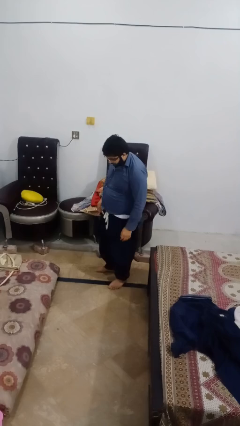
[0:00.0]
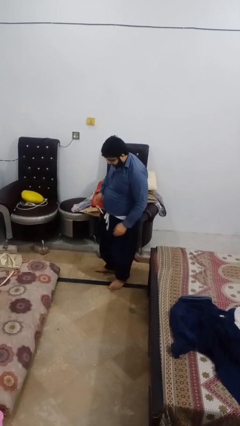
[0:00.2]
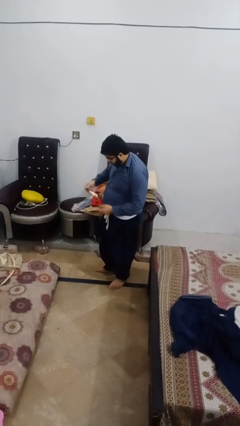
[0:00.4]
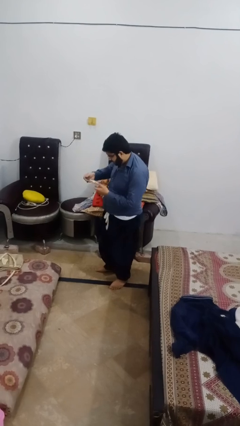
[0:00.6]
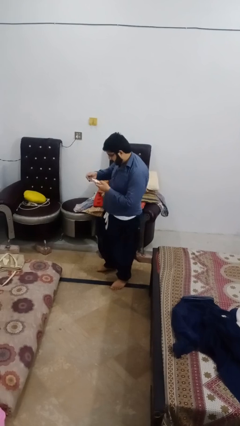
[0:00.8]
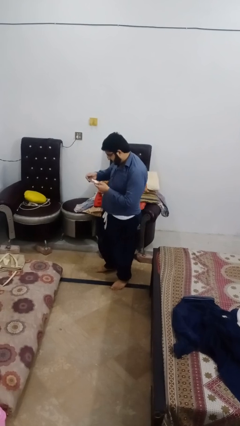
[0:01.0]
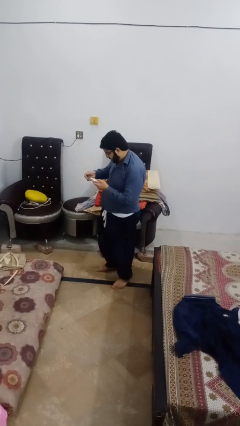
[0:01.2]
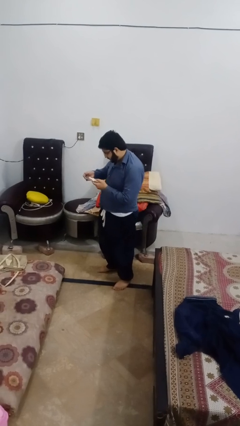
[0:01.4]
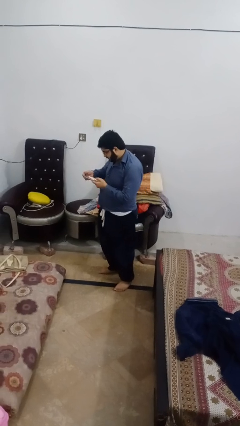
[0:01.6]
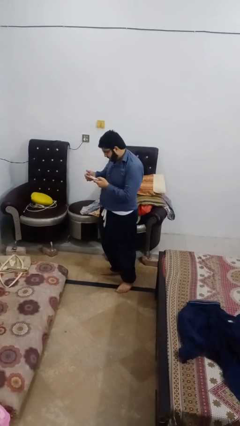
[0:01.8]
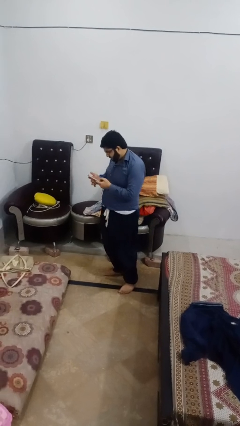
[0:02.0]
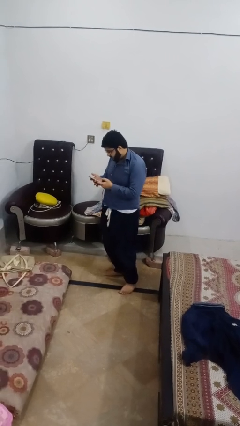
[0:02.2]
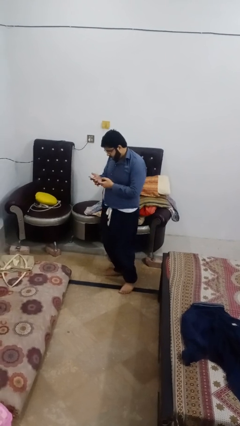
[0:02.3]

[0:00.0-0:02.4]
person takes phone from pocket

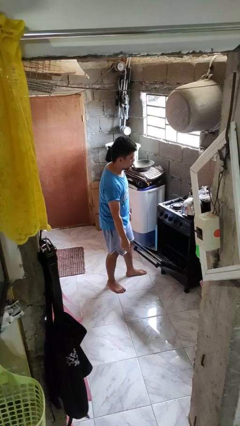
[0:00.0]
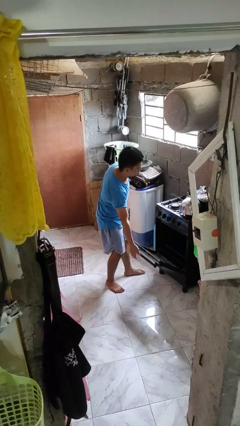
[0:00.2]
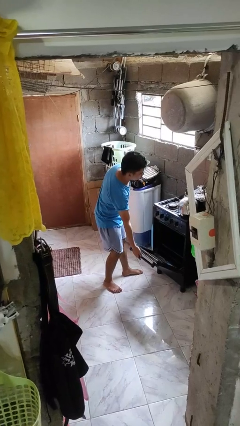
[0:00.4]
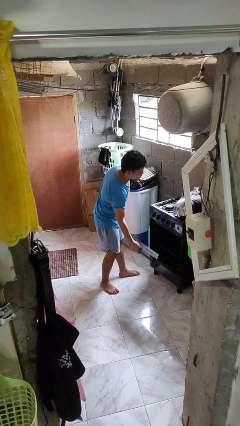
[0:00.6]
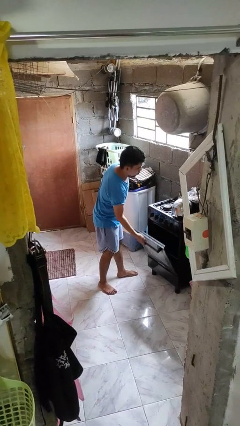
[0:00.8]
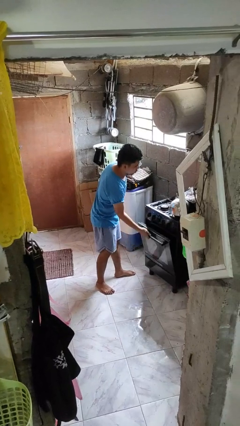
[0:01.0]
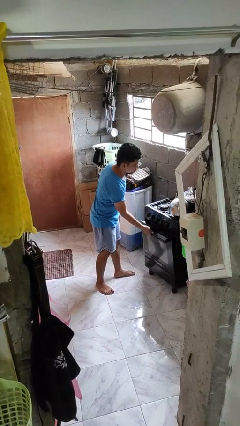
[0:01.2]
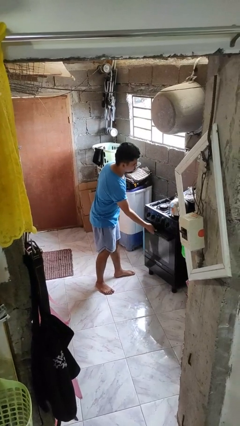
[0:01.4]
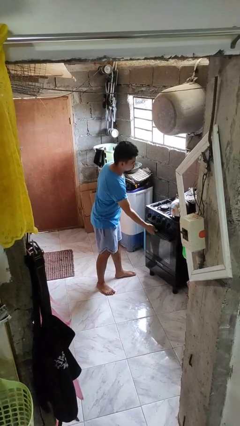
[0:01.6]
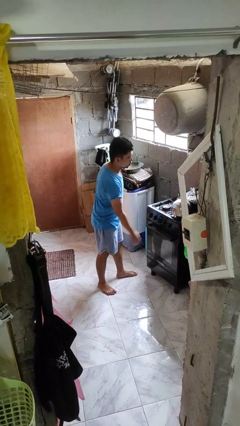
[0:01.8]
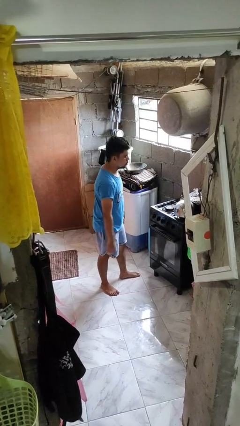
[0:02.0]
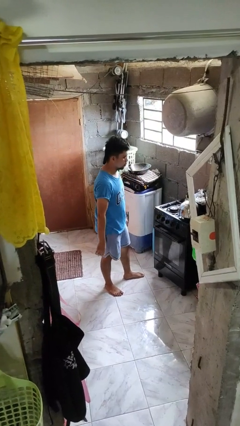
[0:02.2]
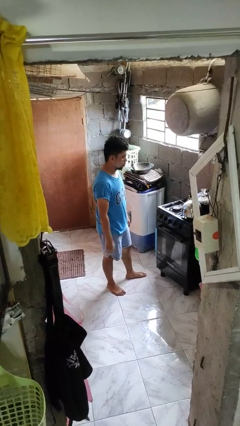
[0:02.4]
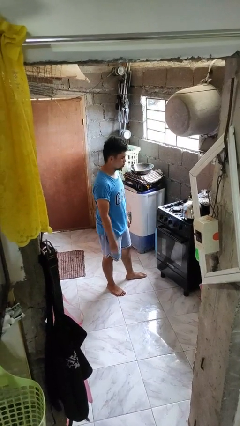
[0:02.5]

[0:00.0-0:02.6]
person closes oven door

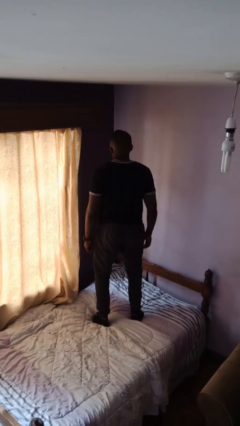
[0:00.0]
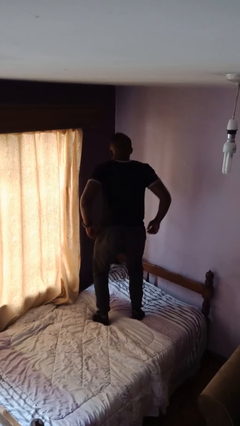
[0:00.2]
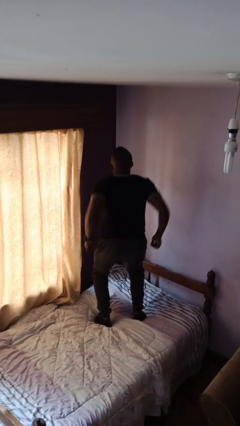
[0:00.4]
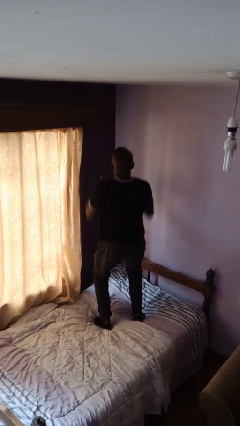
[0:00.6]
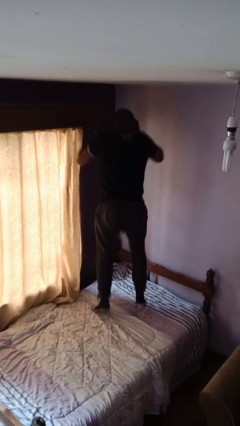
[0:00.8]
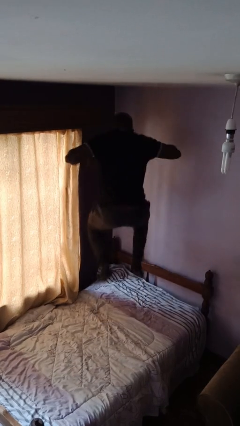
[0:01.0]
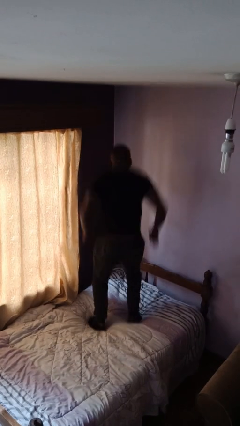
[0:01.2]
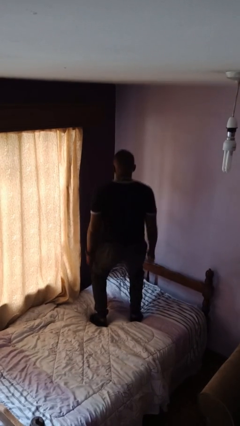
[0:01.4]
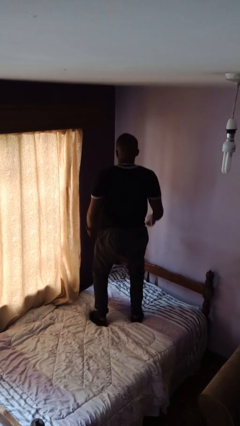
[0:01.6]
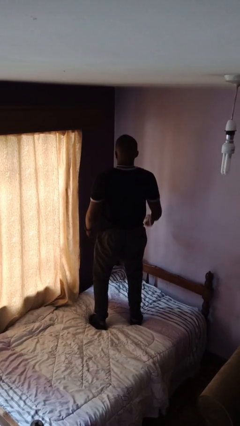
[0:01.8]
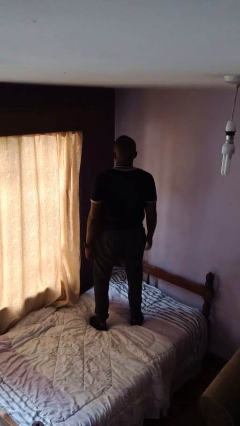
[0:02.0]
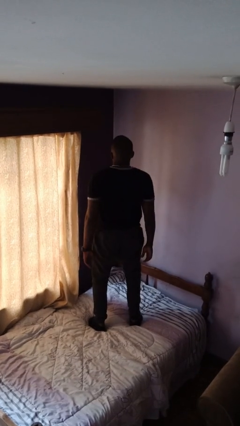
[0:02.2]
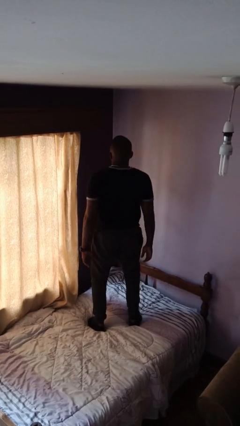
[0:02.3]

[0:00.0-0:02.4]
person jumps on bed

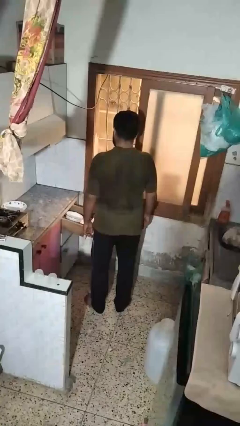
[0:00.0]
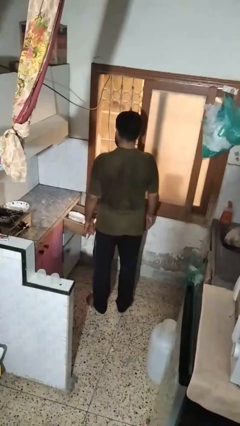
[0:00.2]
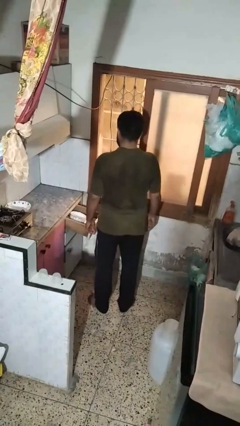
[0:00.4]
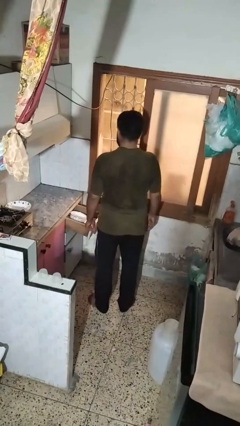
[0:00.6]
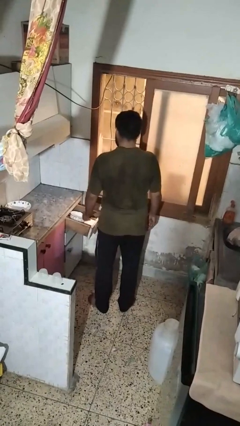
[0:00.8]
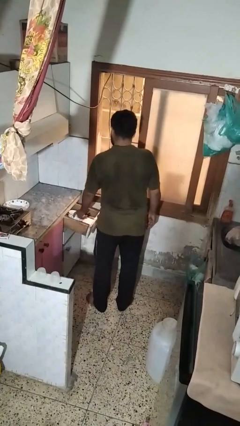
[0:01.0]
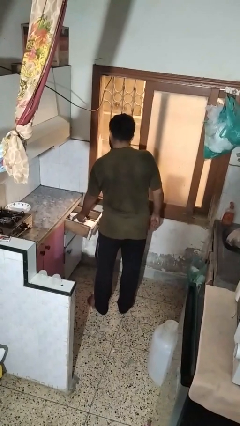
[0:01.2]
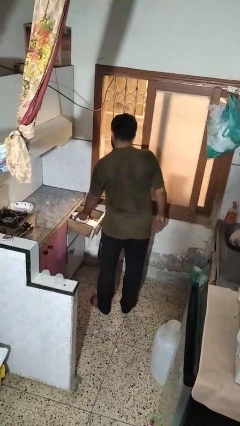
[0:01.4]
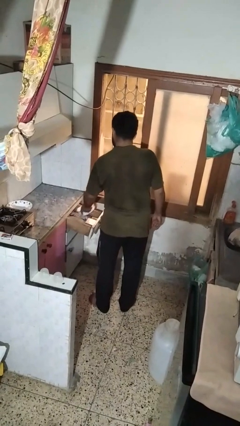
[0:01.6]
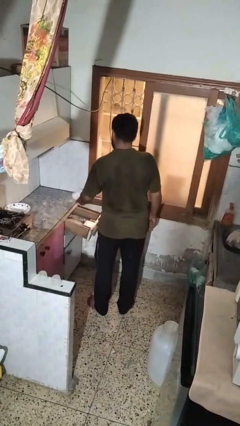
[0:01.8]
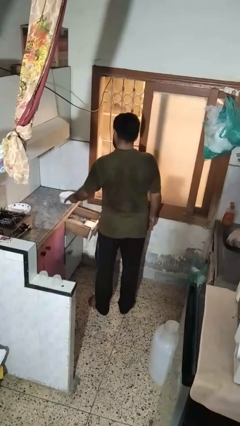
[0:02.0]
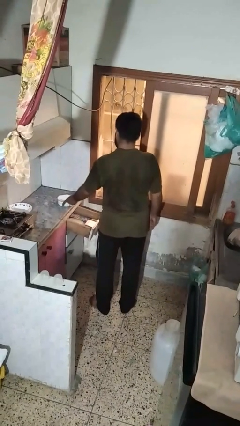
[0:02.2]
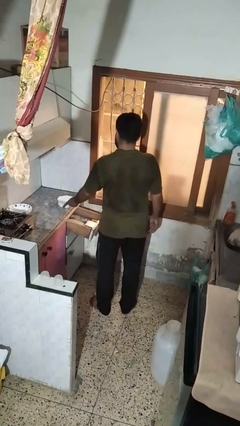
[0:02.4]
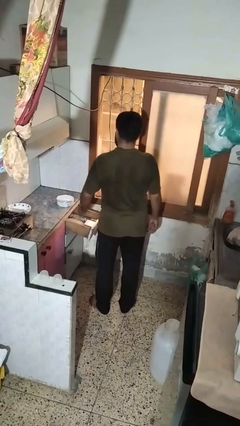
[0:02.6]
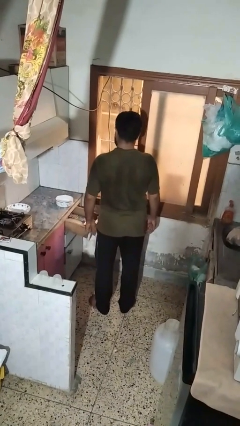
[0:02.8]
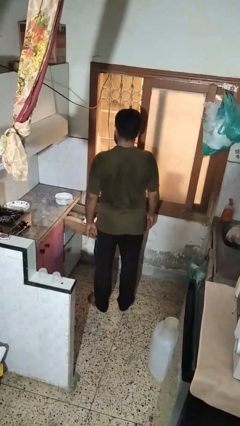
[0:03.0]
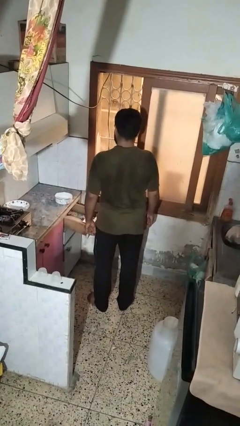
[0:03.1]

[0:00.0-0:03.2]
person takes object from kitchen drawer

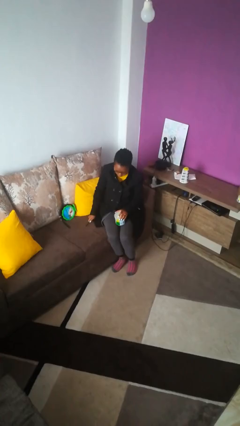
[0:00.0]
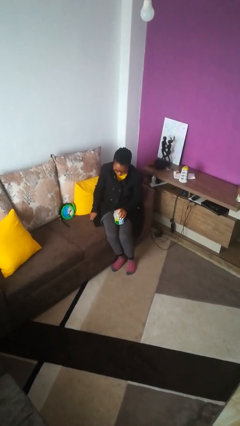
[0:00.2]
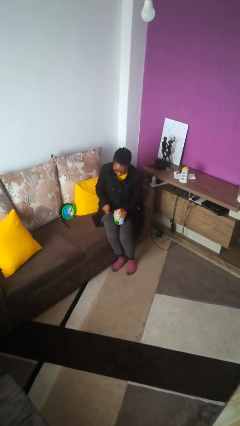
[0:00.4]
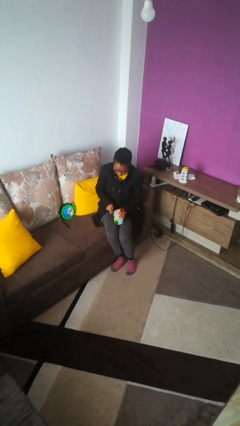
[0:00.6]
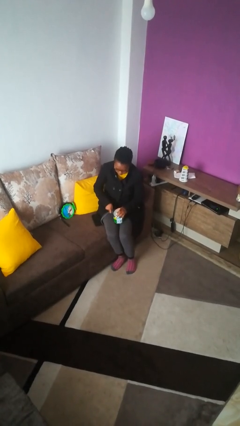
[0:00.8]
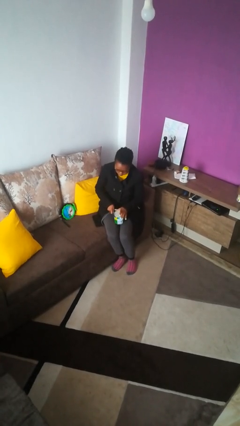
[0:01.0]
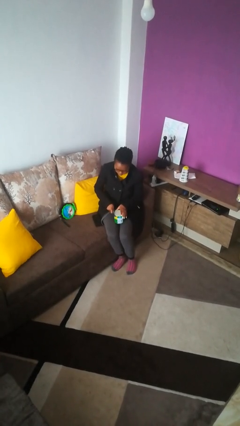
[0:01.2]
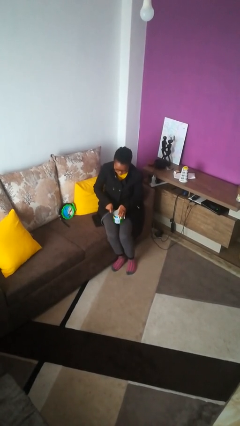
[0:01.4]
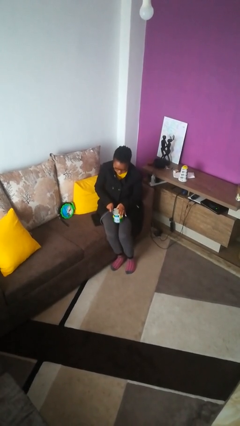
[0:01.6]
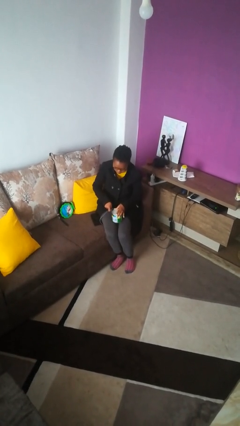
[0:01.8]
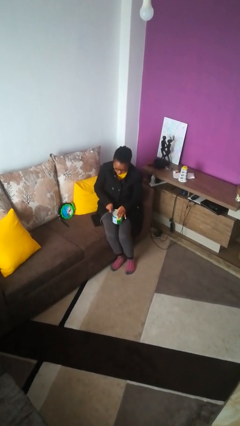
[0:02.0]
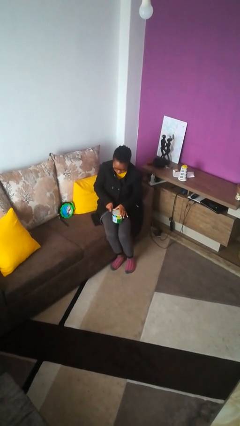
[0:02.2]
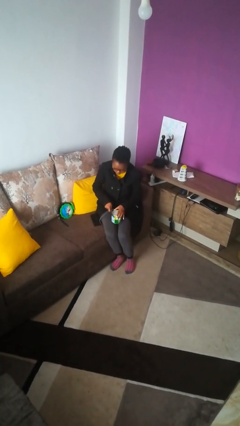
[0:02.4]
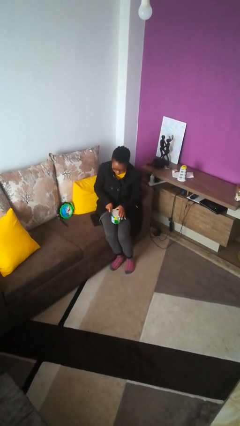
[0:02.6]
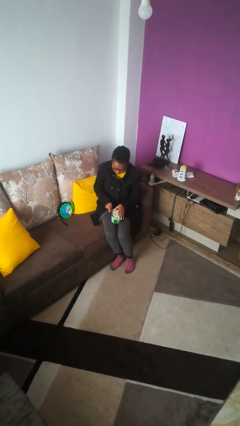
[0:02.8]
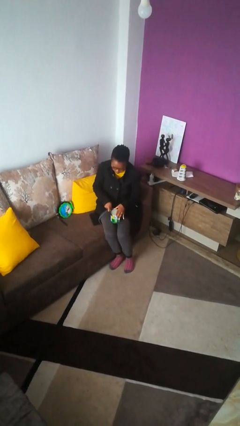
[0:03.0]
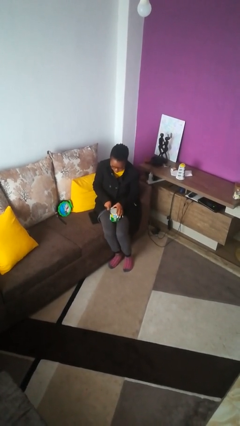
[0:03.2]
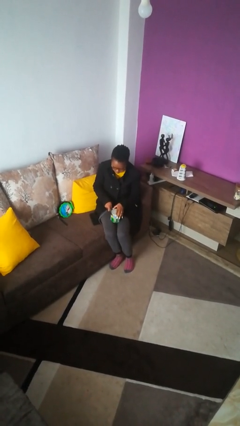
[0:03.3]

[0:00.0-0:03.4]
person opens can with can opener

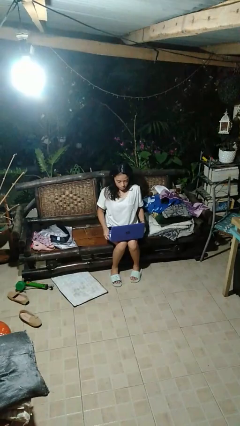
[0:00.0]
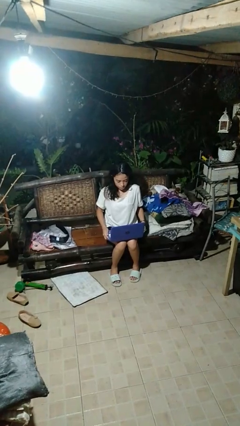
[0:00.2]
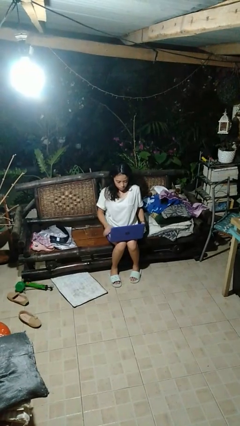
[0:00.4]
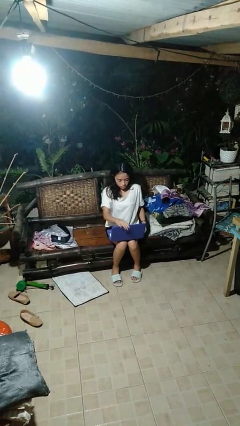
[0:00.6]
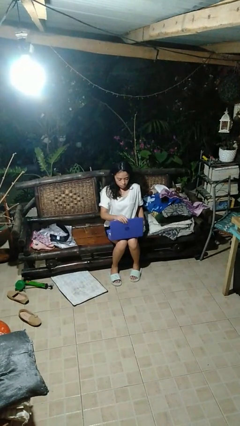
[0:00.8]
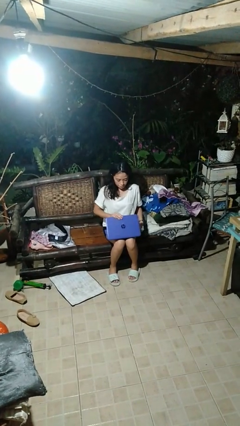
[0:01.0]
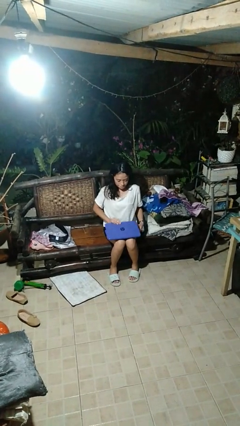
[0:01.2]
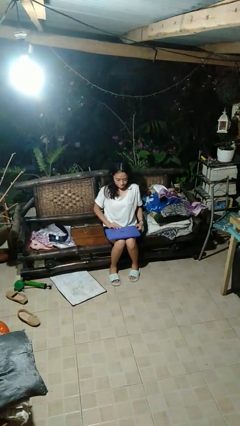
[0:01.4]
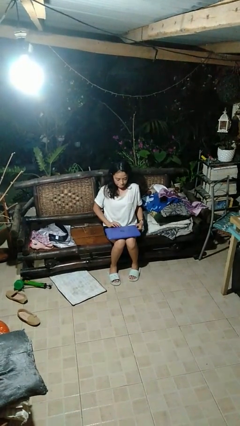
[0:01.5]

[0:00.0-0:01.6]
person closes laptop

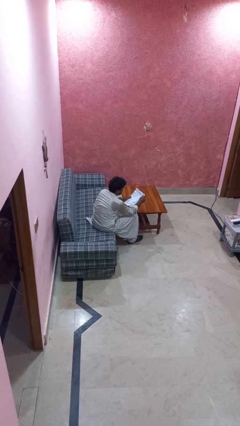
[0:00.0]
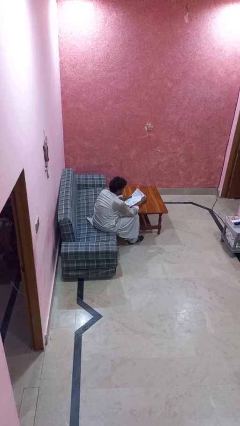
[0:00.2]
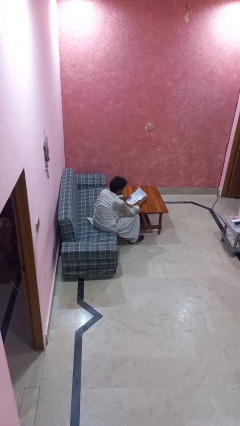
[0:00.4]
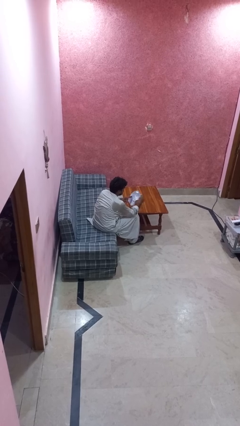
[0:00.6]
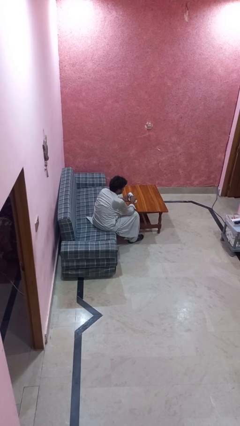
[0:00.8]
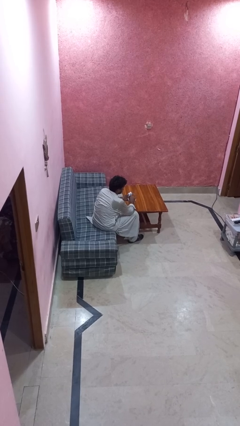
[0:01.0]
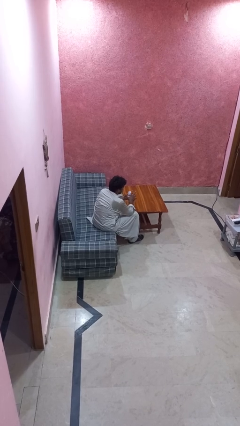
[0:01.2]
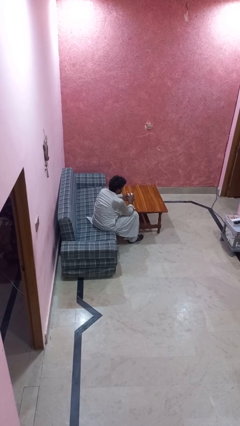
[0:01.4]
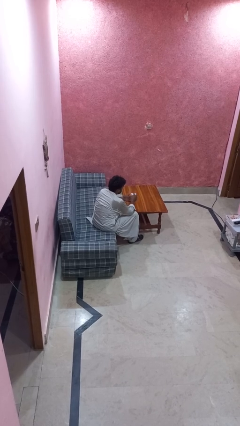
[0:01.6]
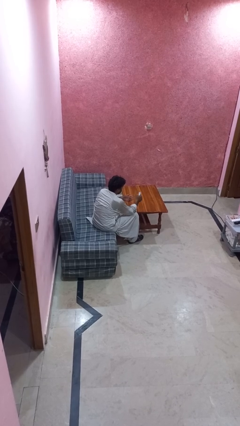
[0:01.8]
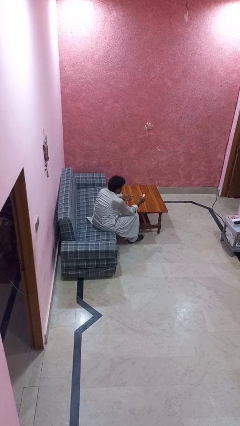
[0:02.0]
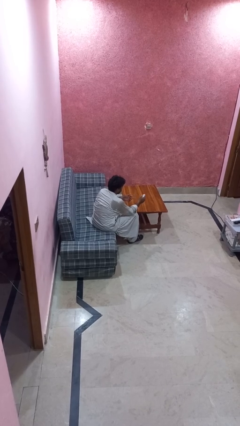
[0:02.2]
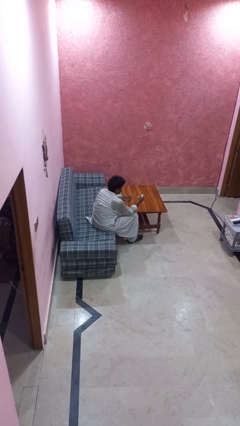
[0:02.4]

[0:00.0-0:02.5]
person crumples paper
